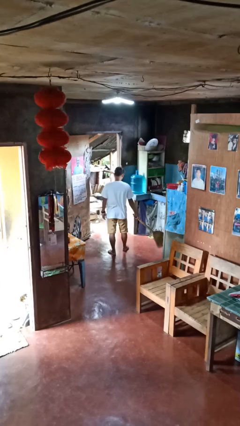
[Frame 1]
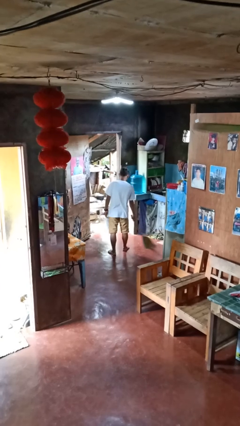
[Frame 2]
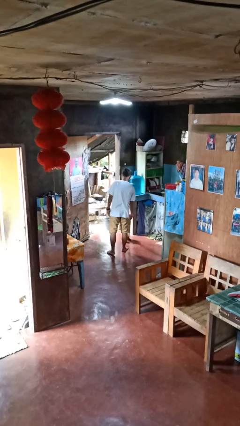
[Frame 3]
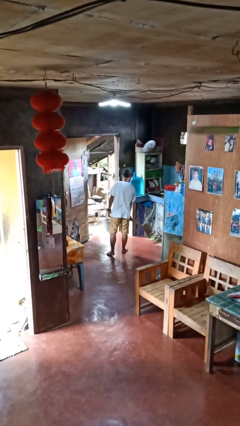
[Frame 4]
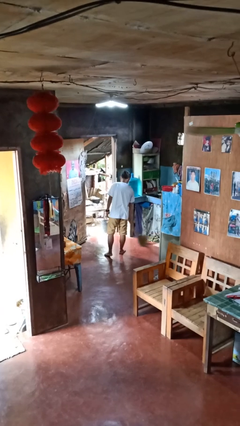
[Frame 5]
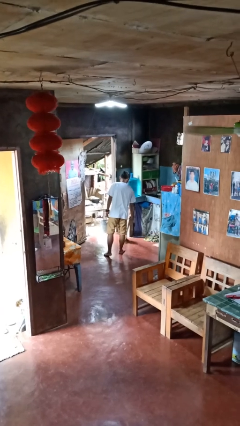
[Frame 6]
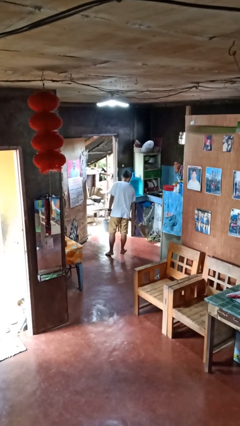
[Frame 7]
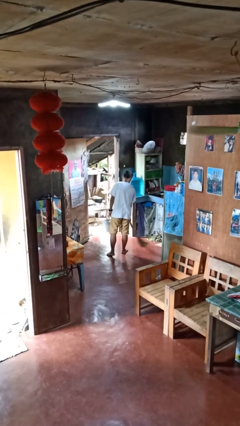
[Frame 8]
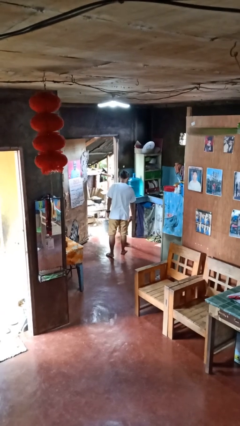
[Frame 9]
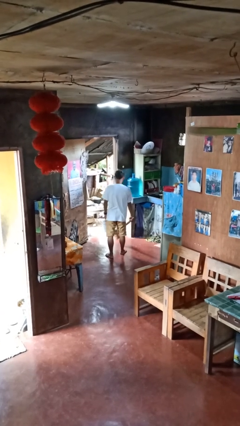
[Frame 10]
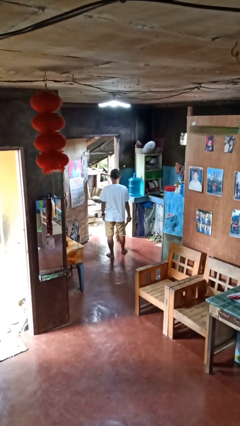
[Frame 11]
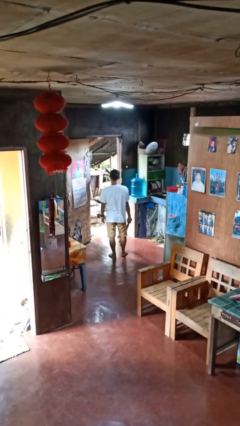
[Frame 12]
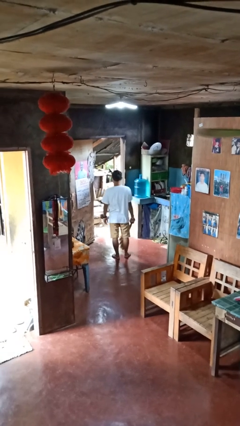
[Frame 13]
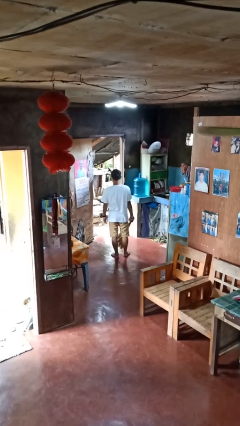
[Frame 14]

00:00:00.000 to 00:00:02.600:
person sweeps floor

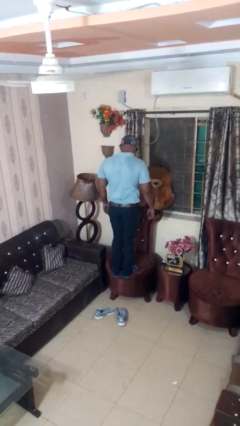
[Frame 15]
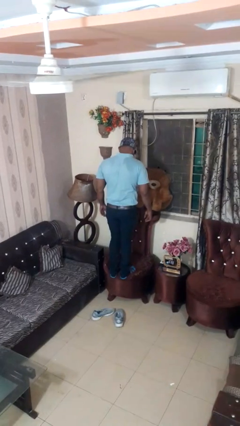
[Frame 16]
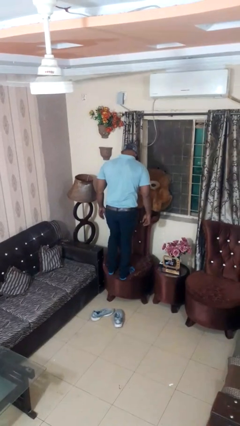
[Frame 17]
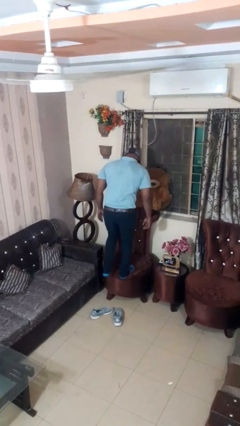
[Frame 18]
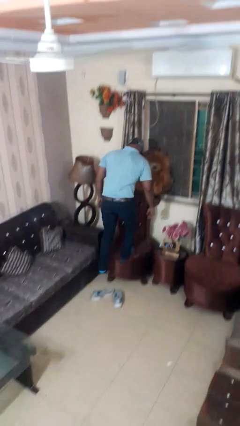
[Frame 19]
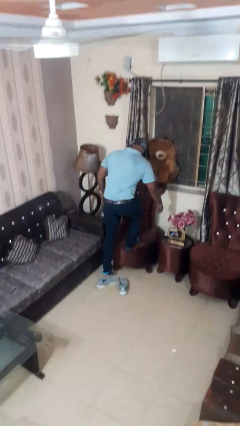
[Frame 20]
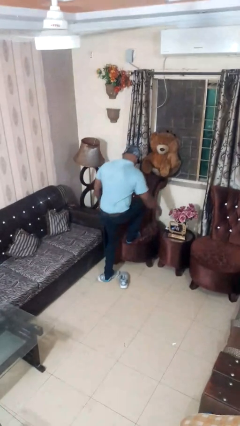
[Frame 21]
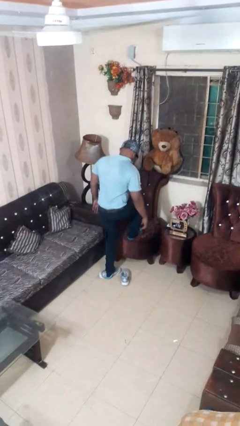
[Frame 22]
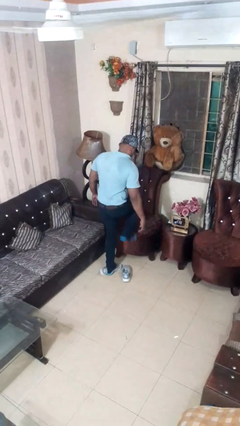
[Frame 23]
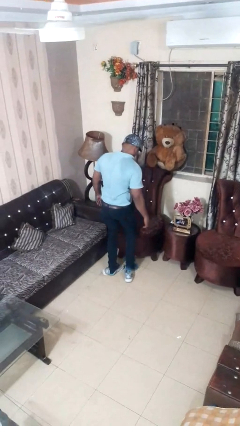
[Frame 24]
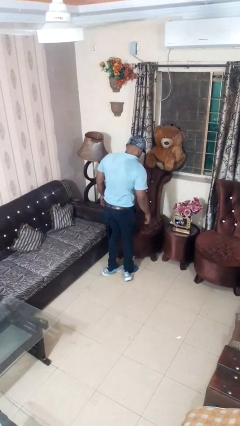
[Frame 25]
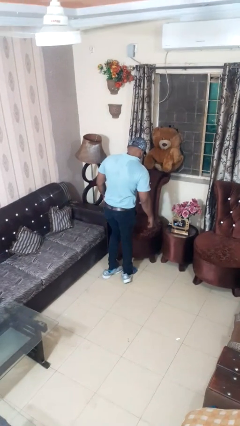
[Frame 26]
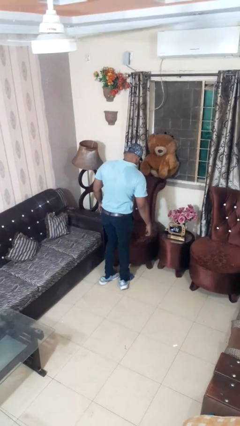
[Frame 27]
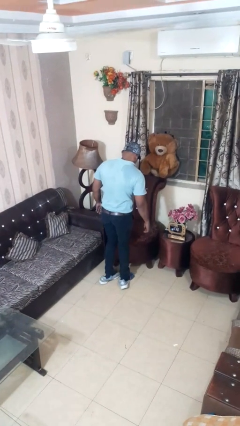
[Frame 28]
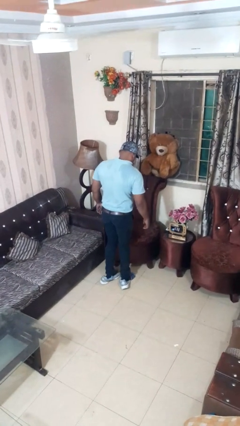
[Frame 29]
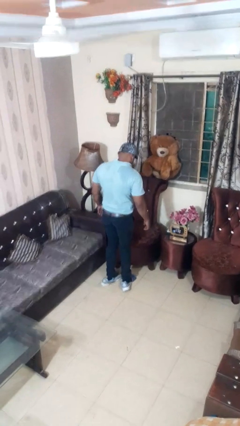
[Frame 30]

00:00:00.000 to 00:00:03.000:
person climbs off chair

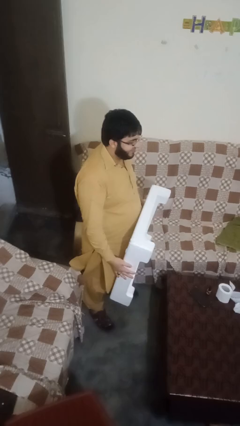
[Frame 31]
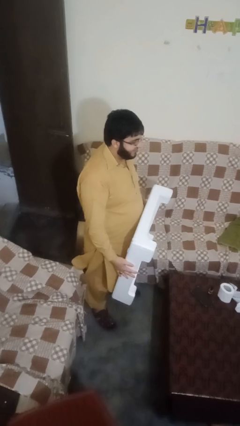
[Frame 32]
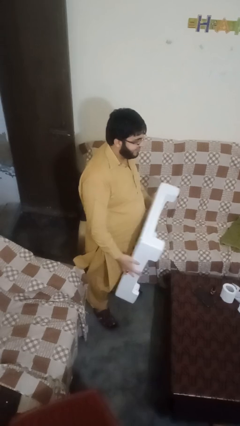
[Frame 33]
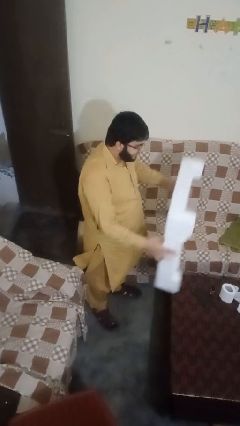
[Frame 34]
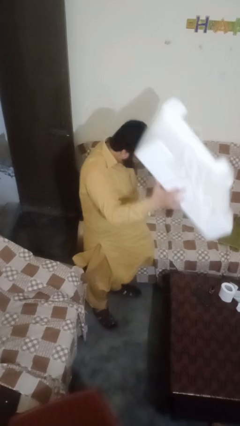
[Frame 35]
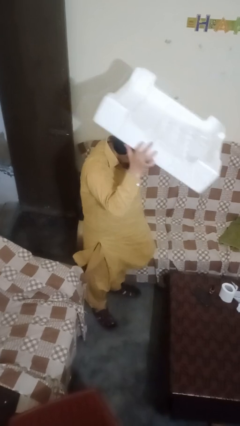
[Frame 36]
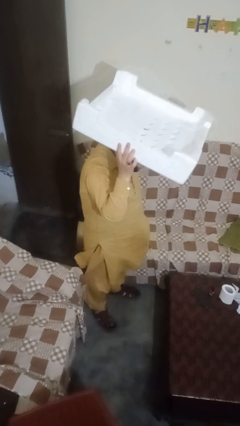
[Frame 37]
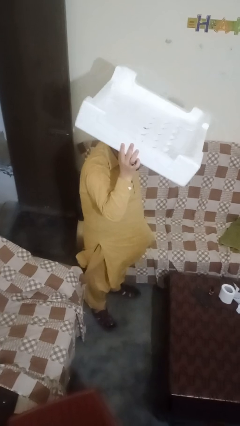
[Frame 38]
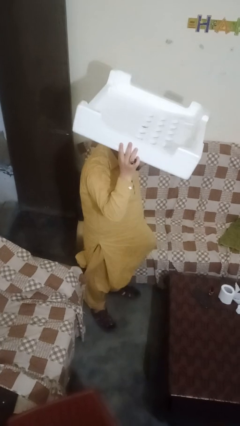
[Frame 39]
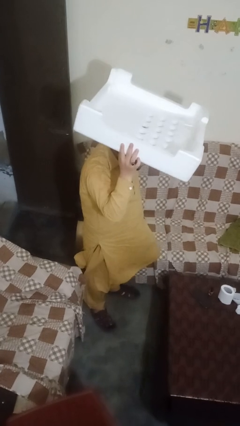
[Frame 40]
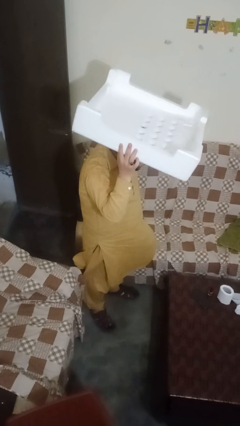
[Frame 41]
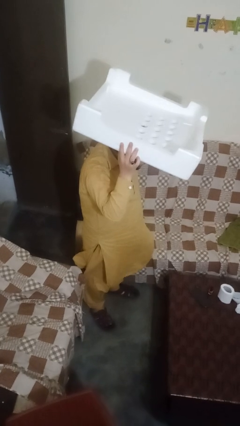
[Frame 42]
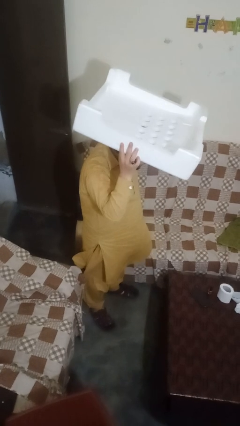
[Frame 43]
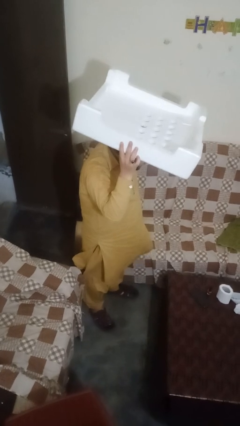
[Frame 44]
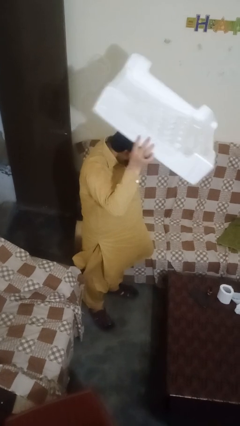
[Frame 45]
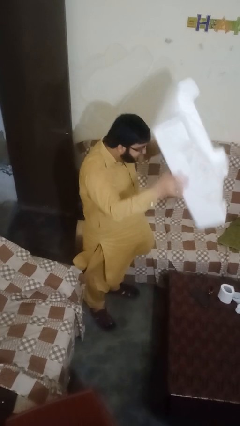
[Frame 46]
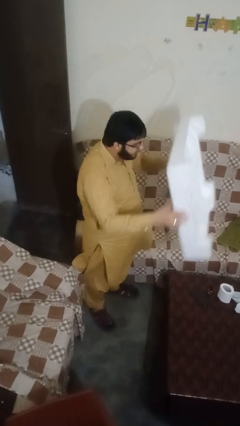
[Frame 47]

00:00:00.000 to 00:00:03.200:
person holds object above head

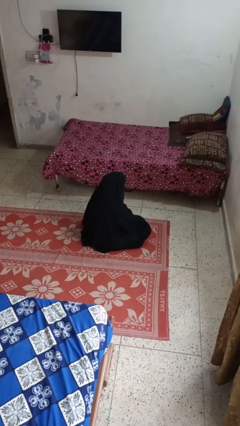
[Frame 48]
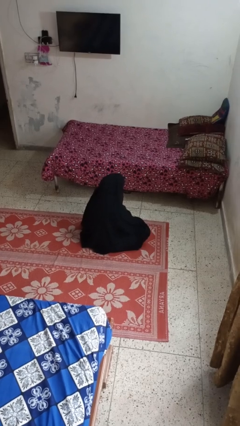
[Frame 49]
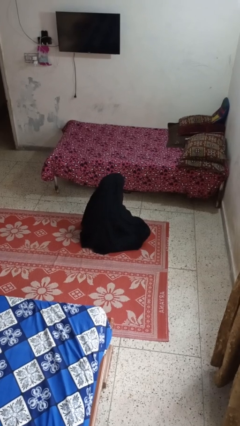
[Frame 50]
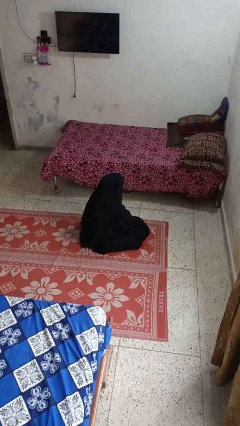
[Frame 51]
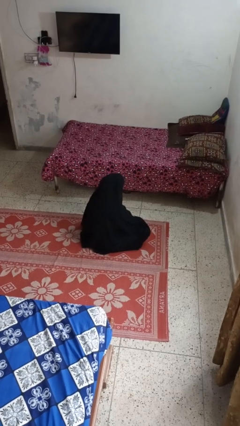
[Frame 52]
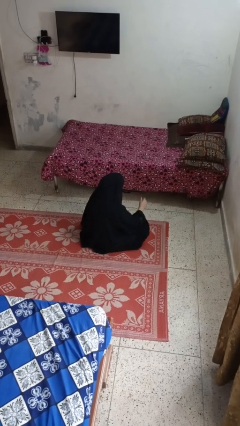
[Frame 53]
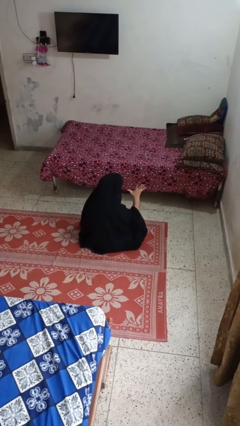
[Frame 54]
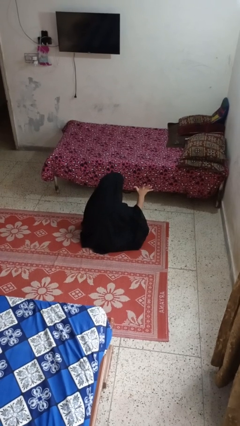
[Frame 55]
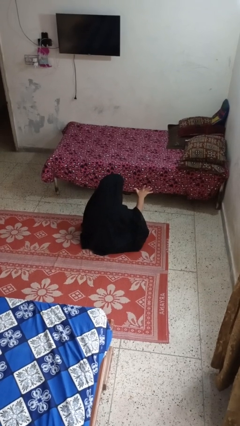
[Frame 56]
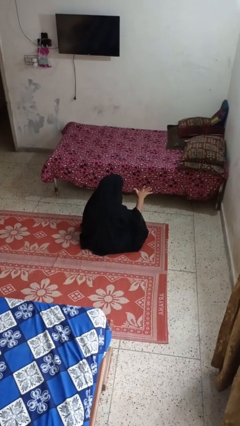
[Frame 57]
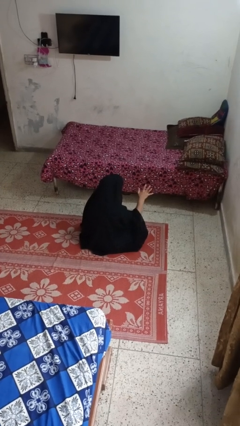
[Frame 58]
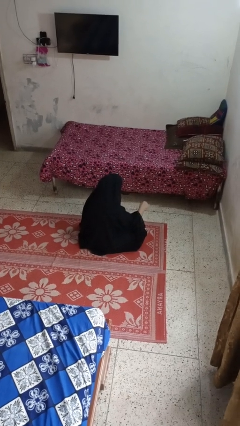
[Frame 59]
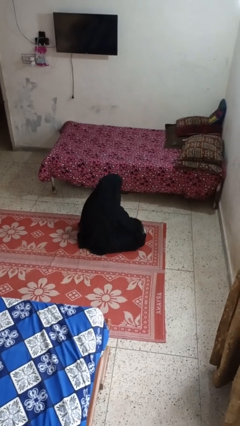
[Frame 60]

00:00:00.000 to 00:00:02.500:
person gestures number five

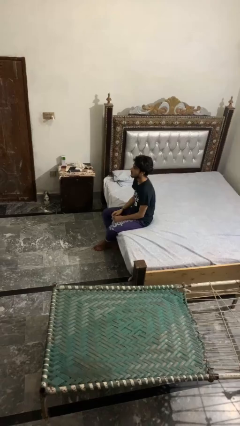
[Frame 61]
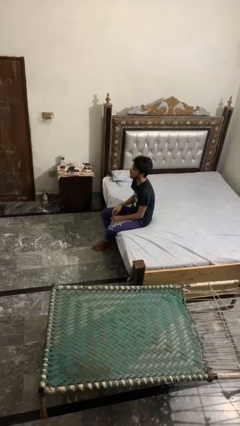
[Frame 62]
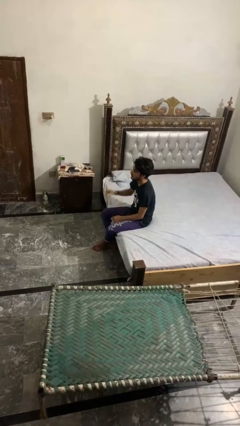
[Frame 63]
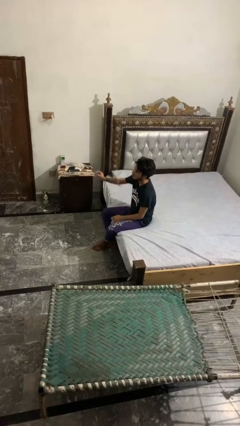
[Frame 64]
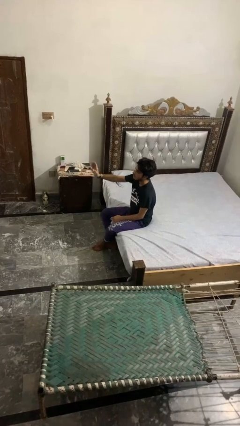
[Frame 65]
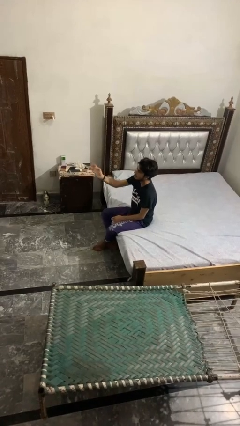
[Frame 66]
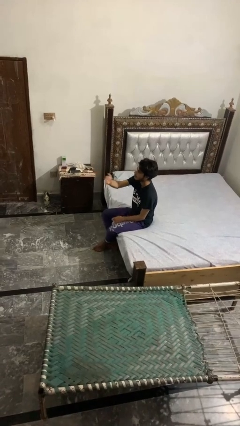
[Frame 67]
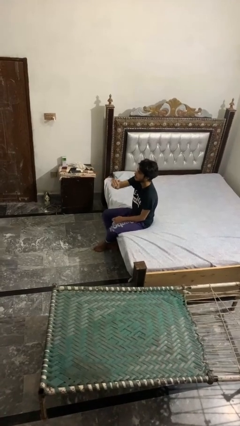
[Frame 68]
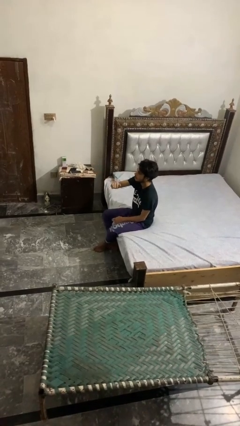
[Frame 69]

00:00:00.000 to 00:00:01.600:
person gestures swipe left

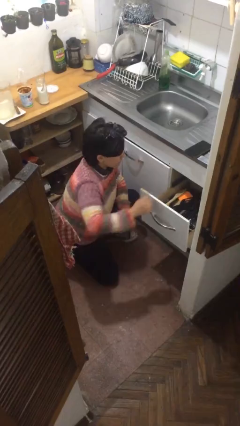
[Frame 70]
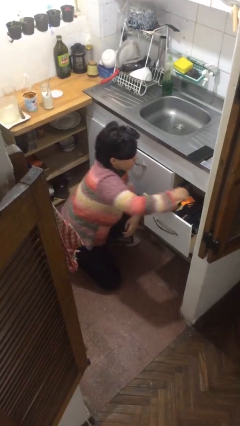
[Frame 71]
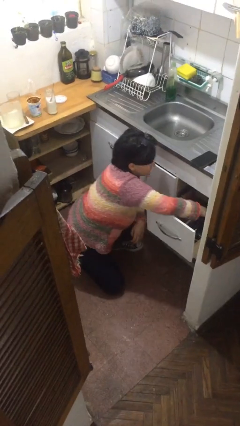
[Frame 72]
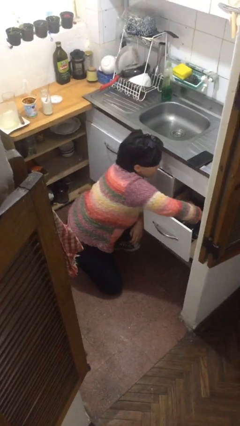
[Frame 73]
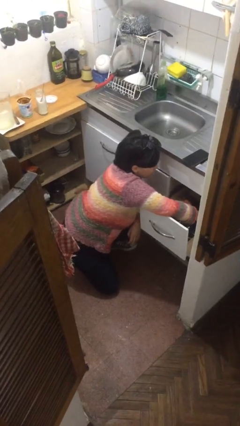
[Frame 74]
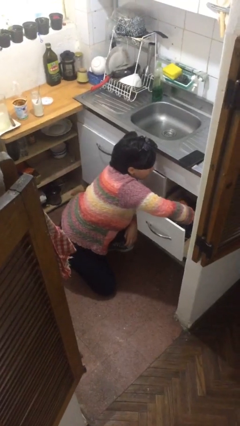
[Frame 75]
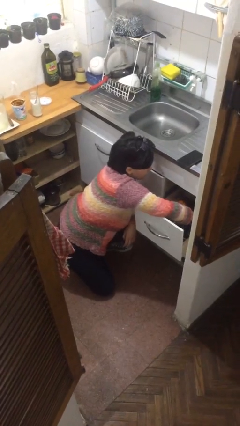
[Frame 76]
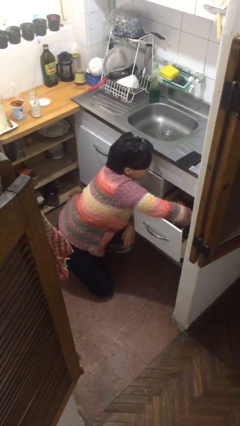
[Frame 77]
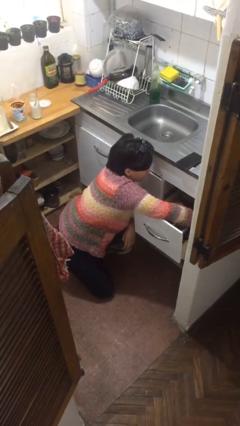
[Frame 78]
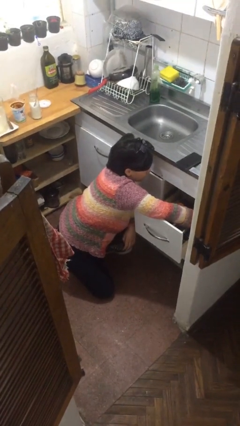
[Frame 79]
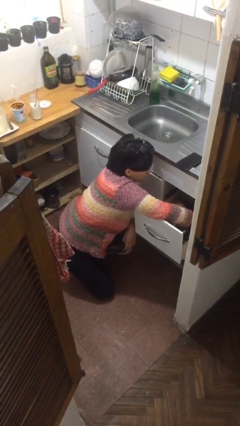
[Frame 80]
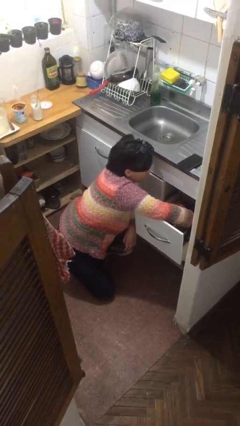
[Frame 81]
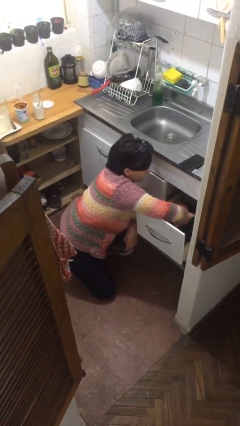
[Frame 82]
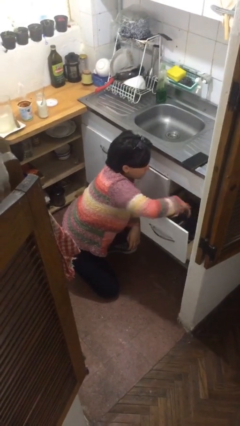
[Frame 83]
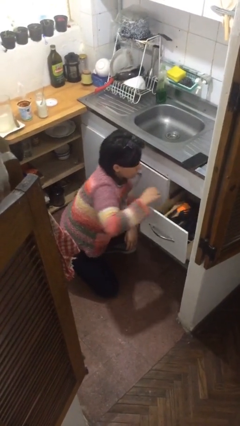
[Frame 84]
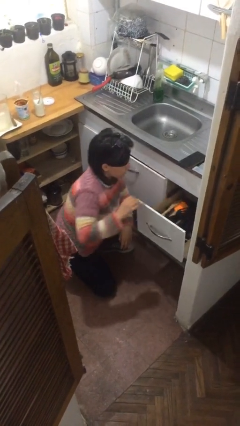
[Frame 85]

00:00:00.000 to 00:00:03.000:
person searches in kitchen drawer

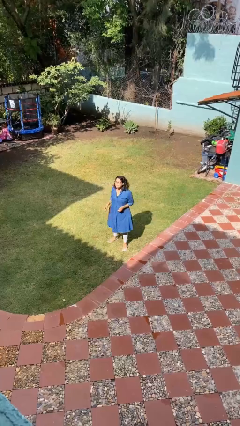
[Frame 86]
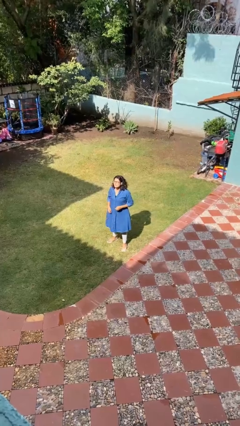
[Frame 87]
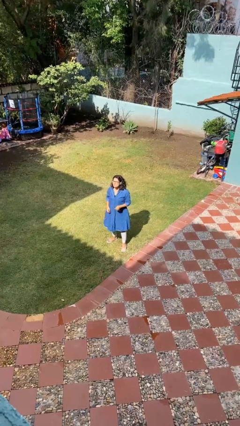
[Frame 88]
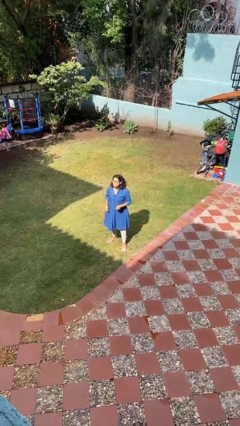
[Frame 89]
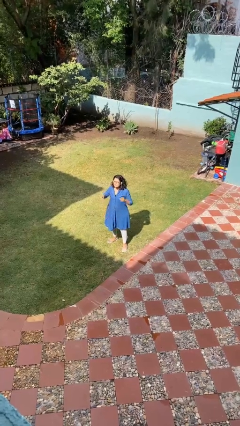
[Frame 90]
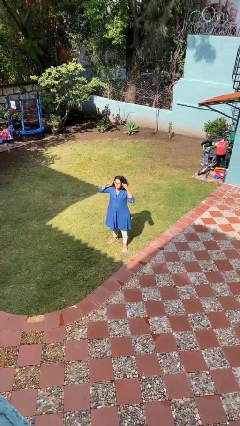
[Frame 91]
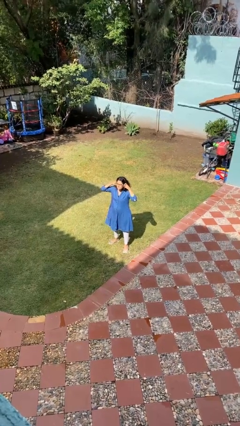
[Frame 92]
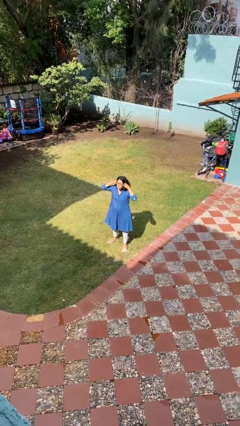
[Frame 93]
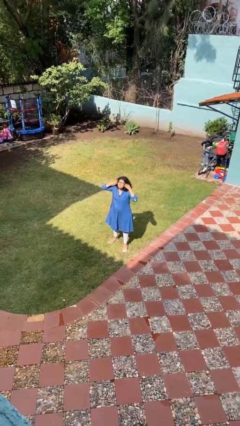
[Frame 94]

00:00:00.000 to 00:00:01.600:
person takes off headphones
